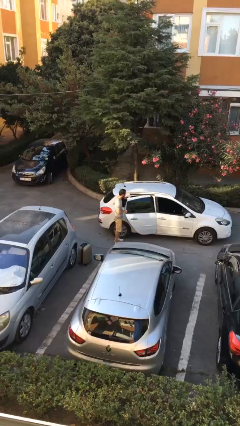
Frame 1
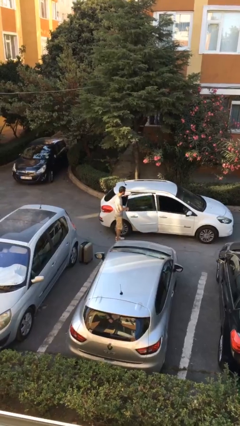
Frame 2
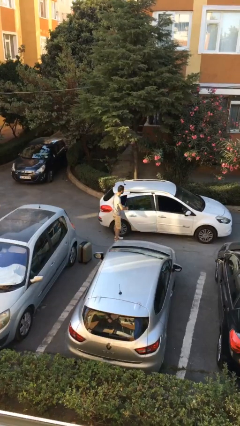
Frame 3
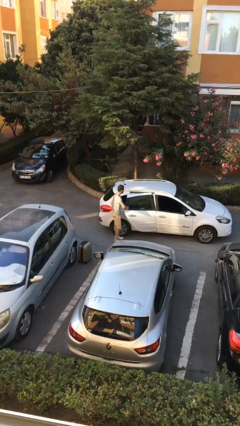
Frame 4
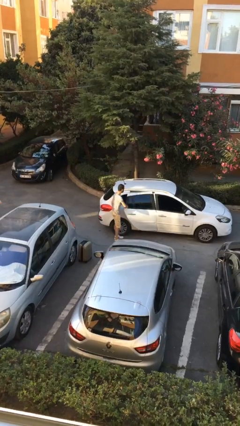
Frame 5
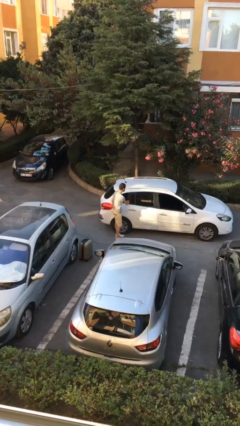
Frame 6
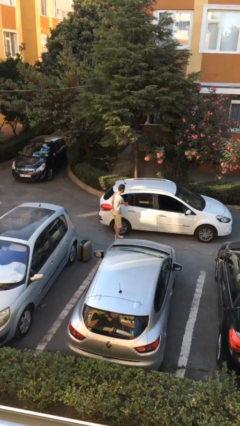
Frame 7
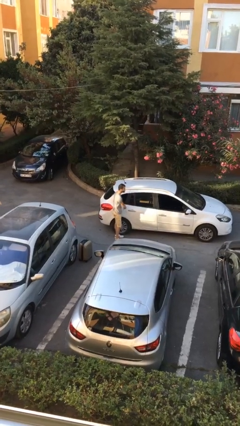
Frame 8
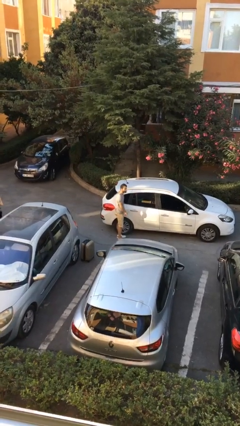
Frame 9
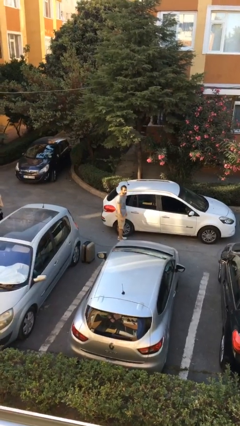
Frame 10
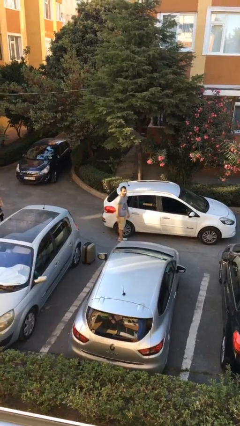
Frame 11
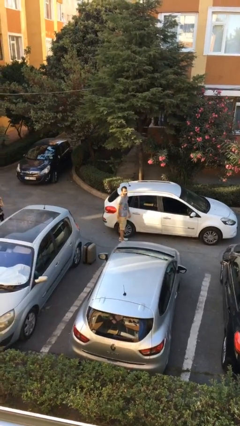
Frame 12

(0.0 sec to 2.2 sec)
person closes car door

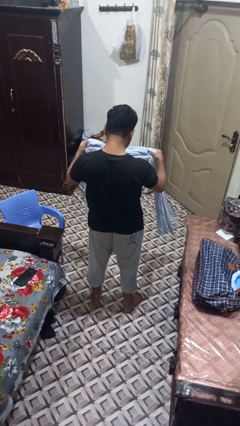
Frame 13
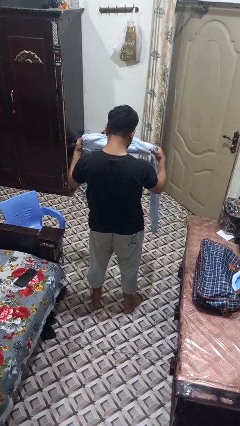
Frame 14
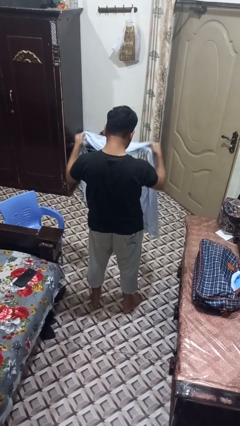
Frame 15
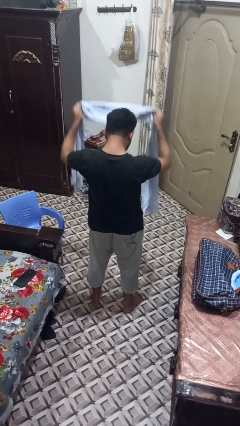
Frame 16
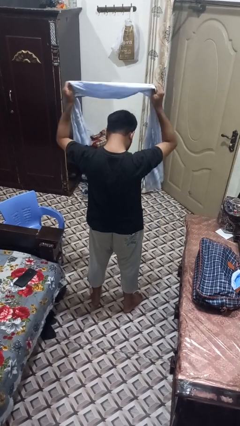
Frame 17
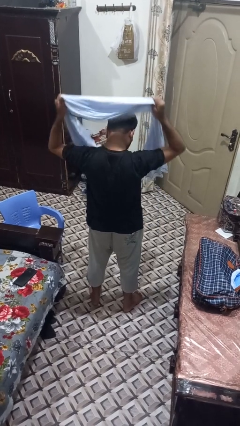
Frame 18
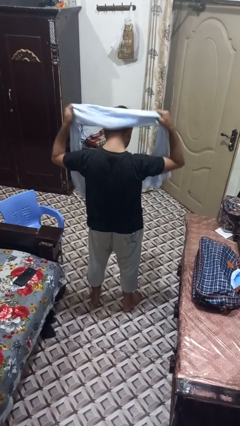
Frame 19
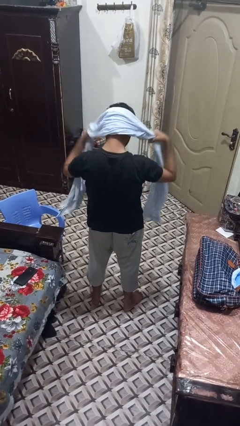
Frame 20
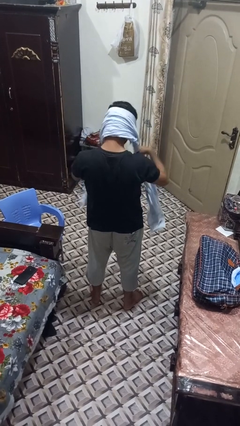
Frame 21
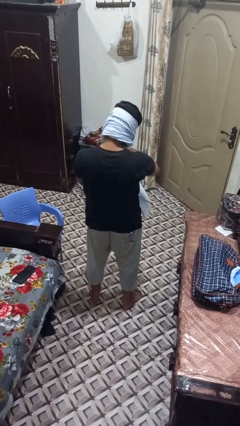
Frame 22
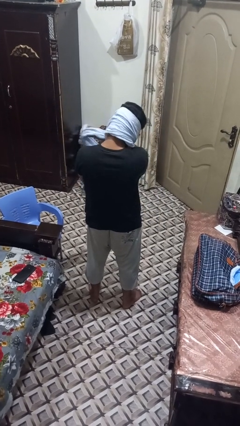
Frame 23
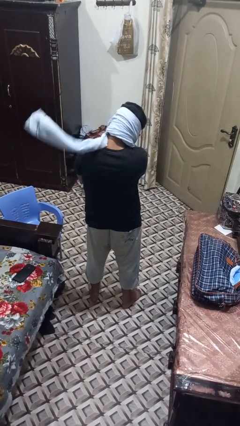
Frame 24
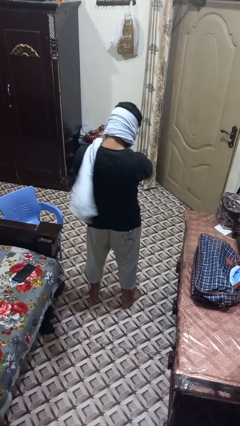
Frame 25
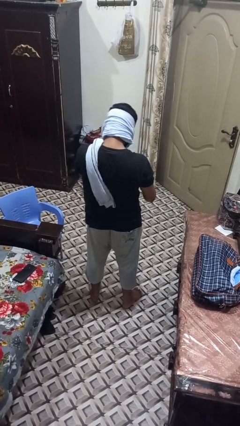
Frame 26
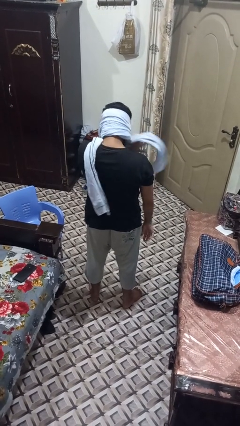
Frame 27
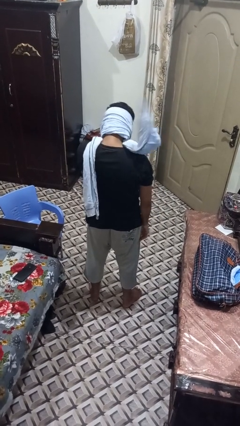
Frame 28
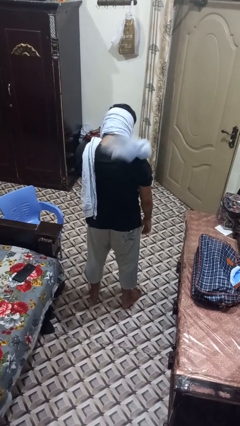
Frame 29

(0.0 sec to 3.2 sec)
person puts on scarf

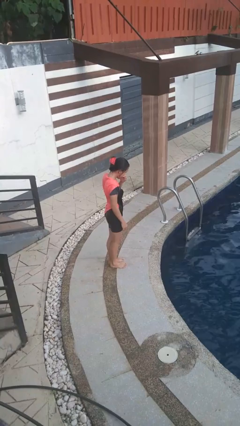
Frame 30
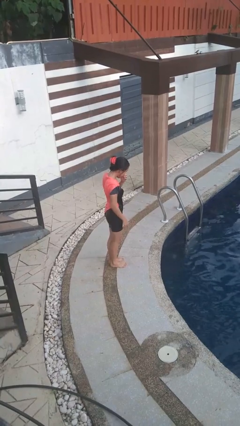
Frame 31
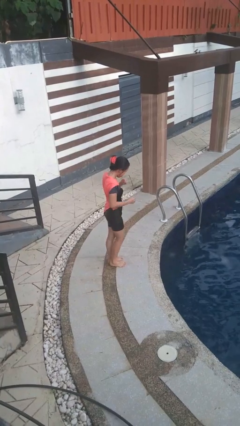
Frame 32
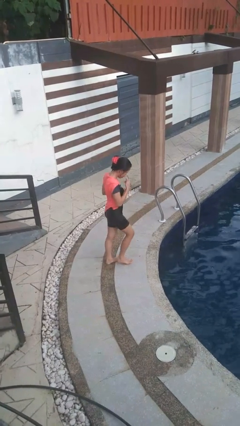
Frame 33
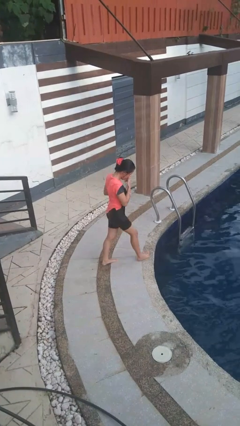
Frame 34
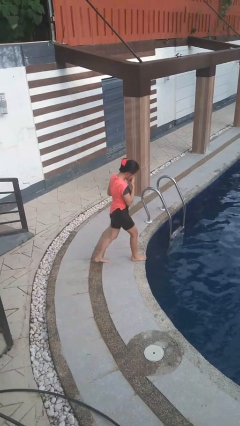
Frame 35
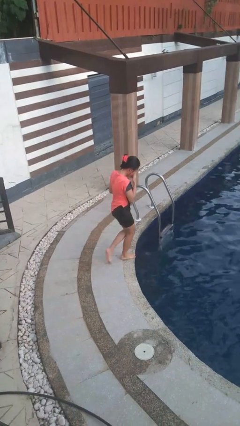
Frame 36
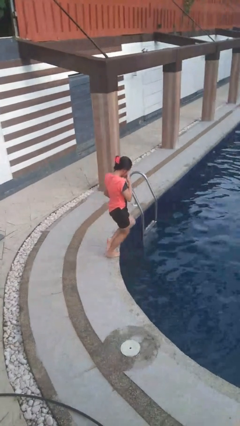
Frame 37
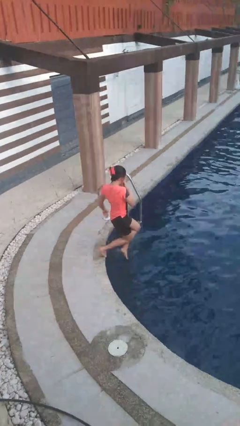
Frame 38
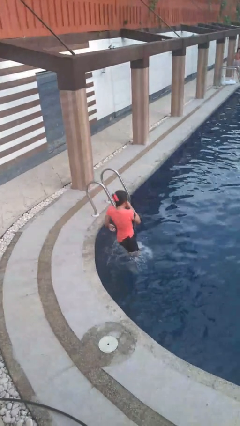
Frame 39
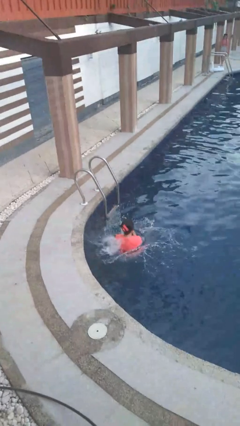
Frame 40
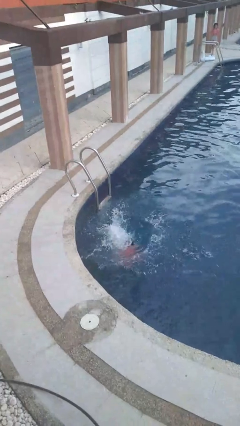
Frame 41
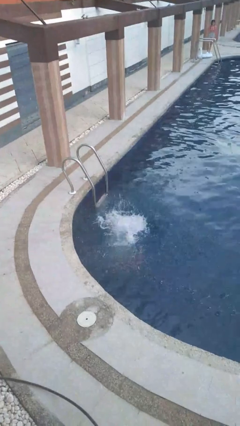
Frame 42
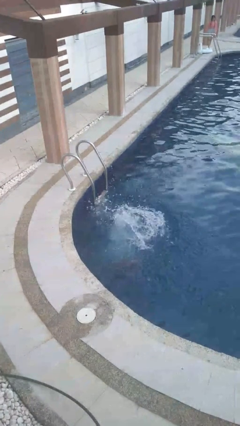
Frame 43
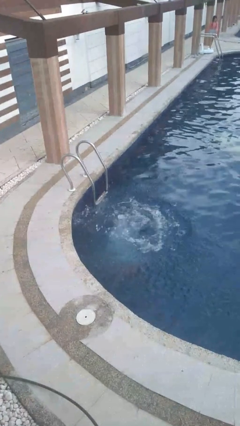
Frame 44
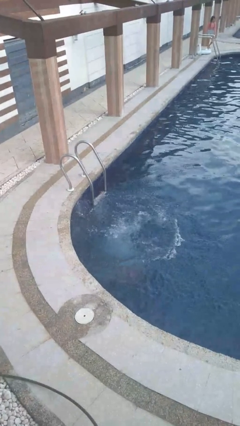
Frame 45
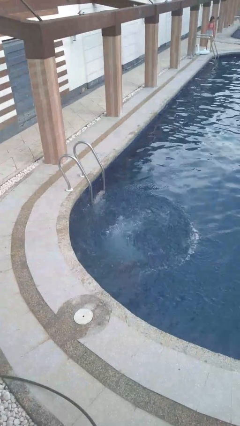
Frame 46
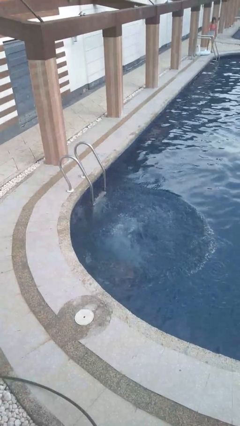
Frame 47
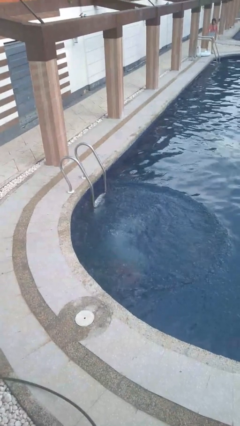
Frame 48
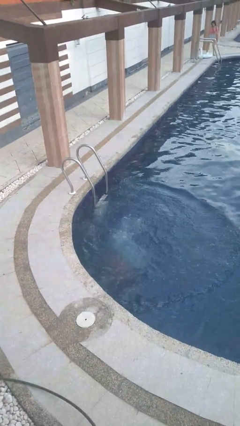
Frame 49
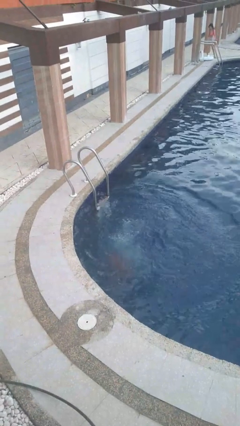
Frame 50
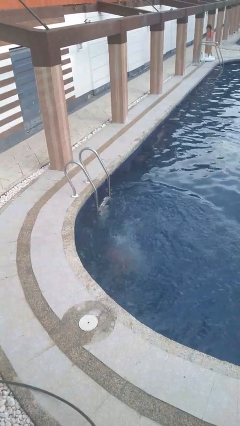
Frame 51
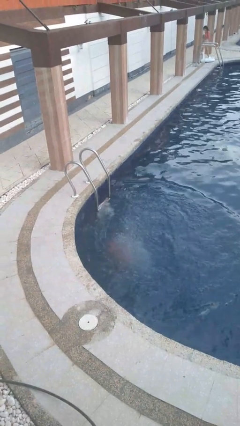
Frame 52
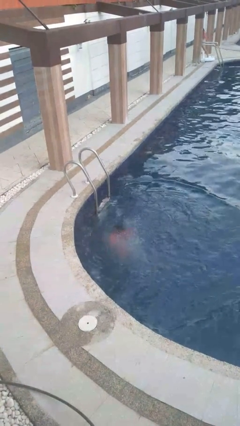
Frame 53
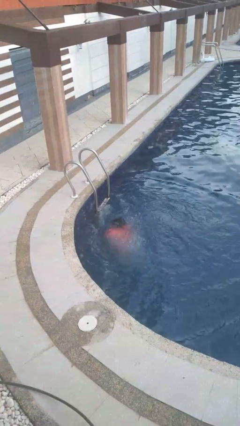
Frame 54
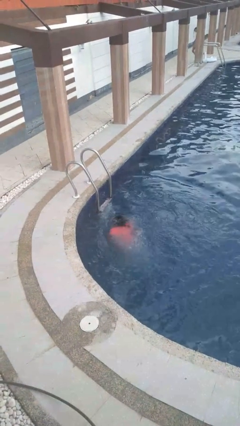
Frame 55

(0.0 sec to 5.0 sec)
person falls into pool

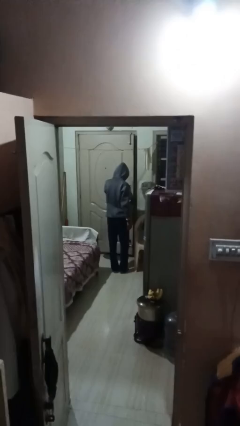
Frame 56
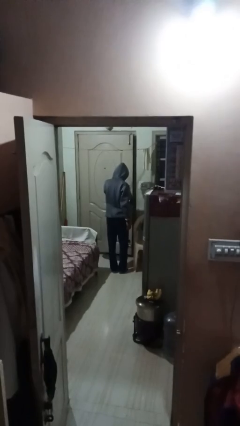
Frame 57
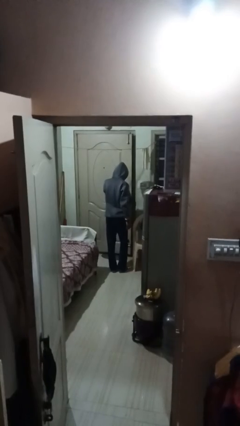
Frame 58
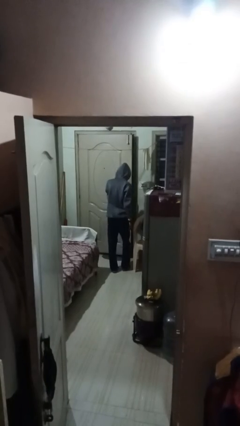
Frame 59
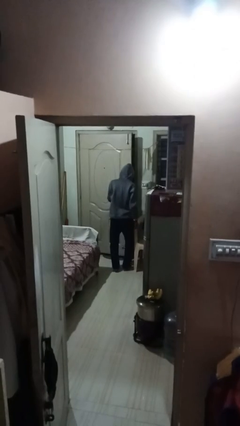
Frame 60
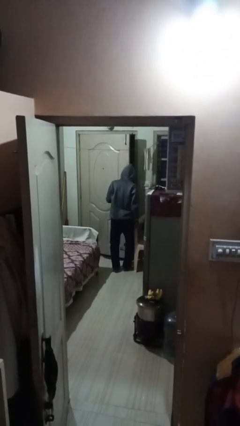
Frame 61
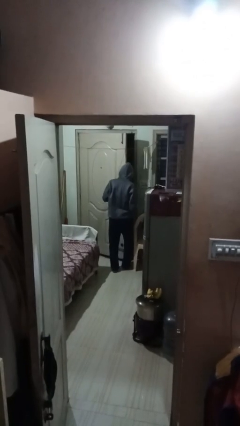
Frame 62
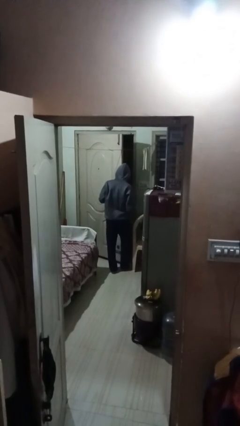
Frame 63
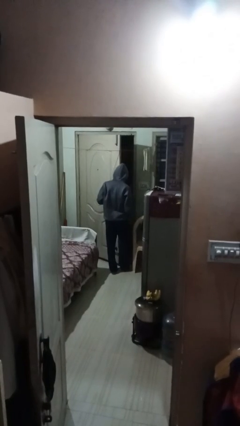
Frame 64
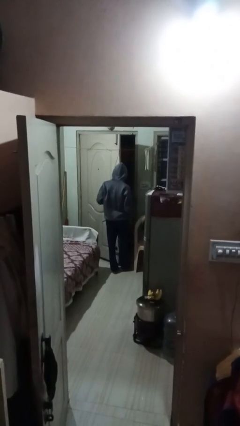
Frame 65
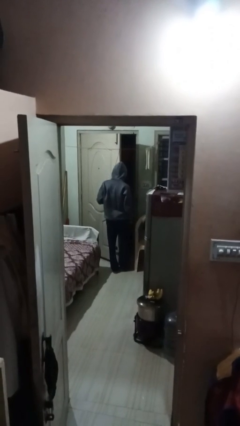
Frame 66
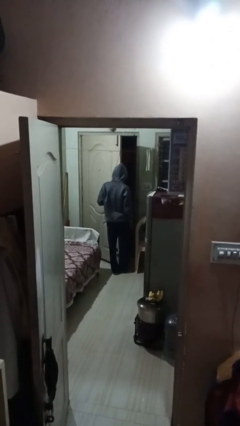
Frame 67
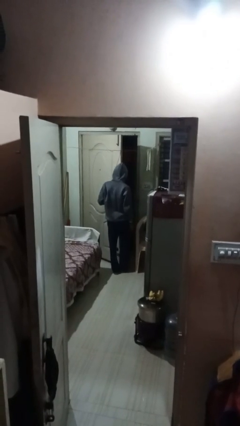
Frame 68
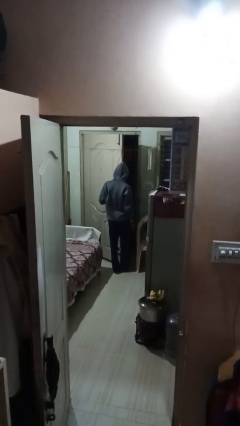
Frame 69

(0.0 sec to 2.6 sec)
person opens facility door

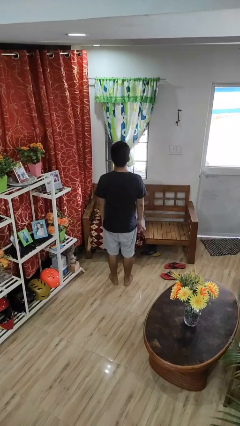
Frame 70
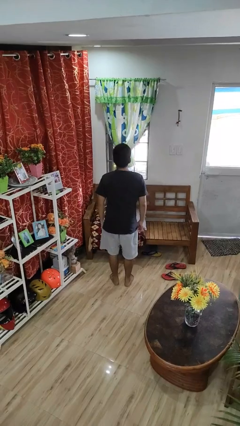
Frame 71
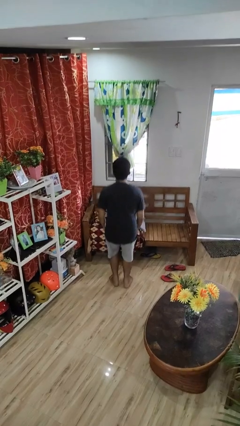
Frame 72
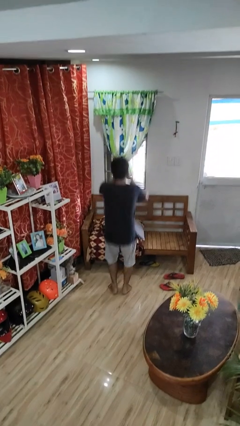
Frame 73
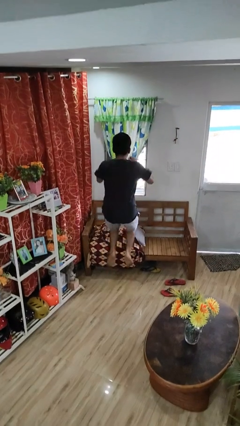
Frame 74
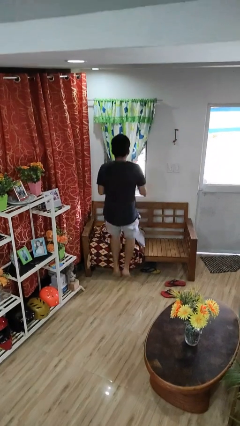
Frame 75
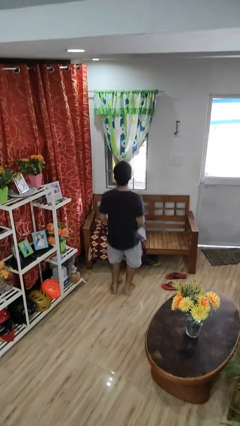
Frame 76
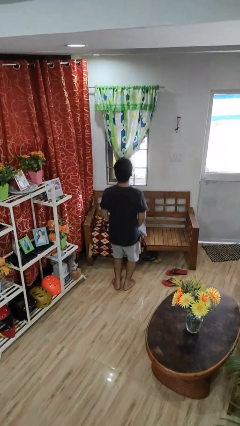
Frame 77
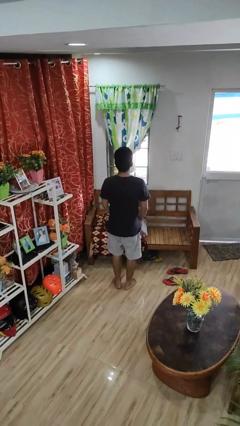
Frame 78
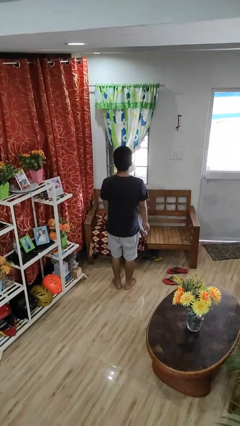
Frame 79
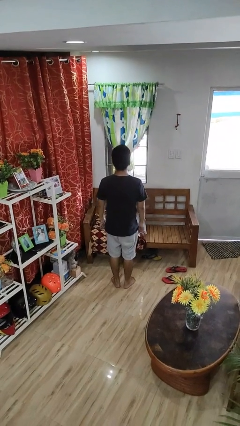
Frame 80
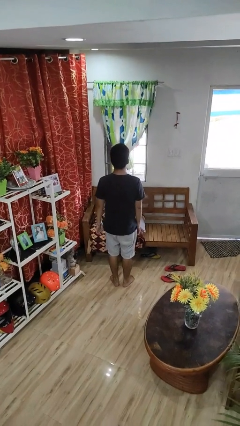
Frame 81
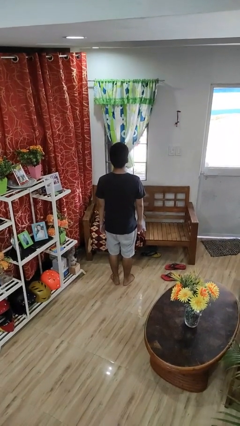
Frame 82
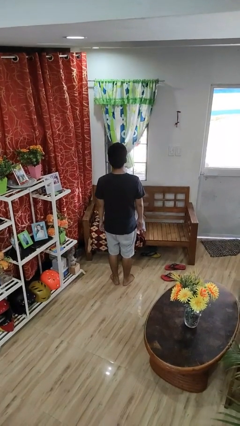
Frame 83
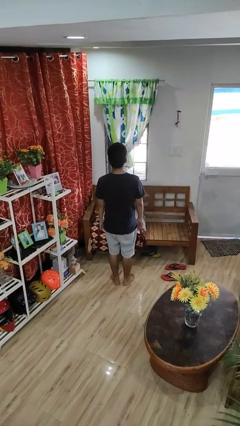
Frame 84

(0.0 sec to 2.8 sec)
person jumps

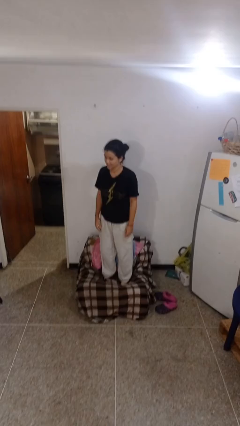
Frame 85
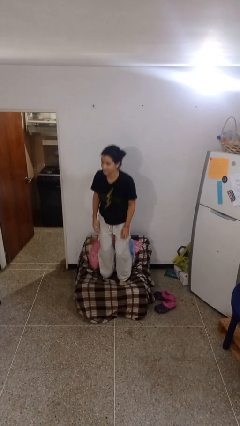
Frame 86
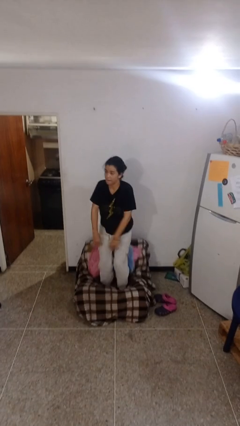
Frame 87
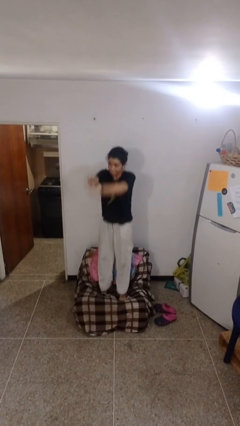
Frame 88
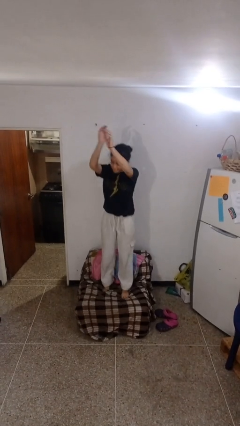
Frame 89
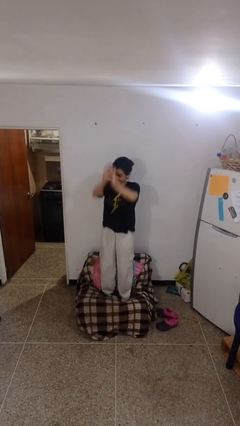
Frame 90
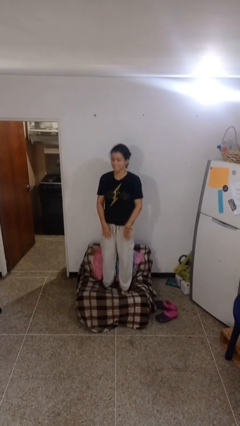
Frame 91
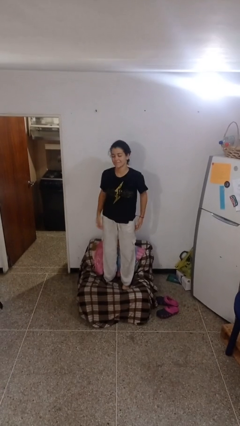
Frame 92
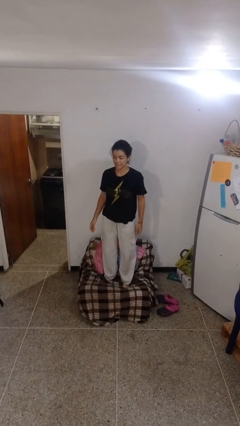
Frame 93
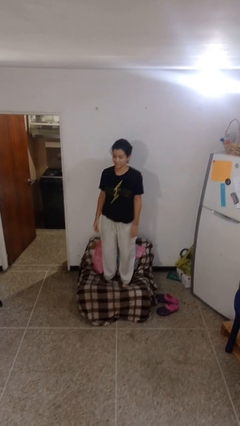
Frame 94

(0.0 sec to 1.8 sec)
person jumps on couch
